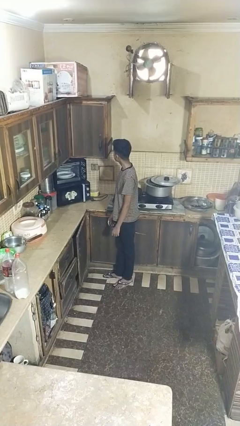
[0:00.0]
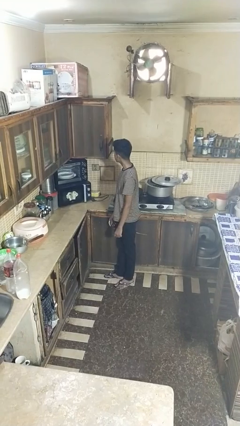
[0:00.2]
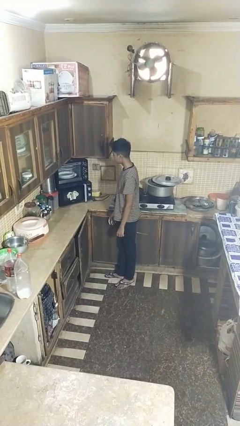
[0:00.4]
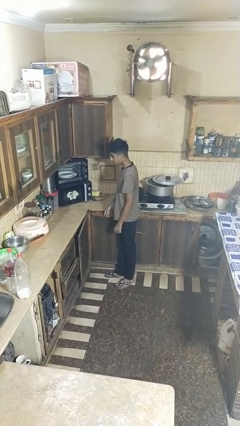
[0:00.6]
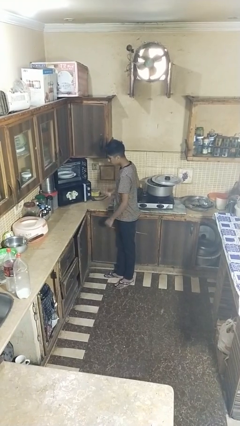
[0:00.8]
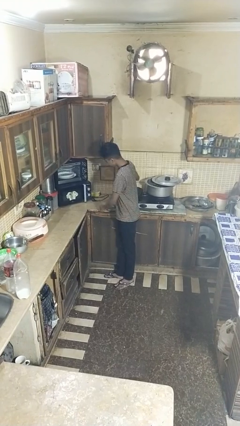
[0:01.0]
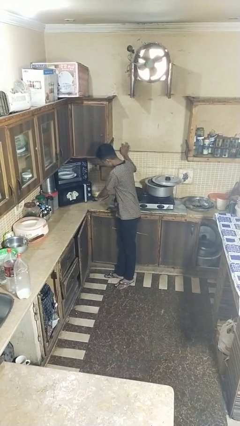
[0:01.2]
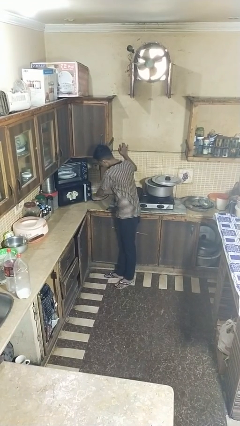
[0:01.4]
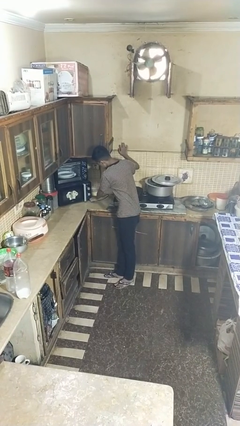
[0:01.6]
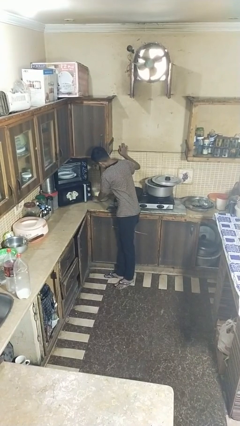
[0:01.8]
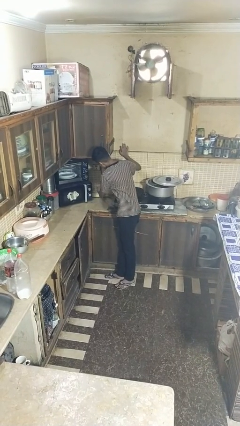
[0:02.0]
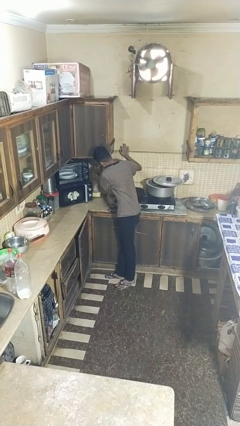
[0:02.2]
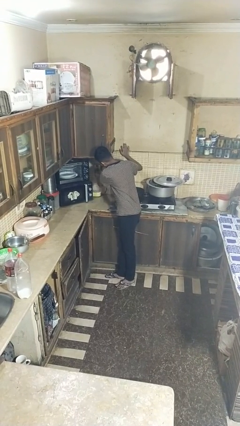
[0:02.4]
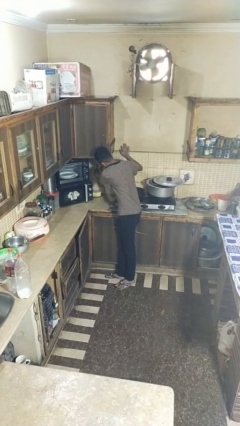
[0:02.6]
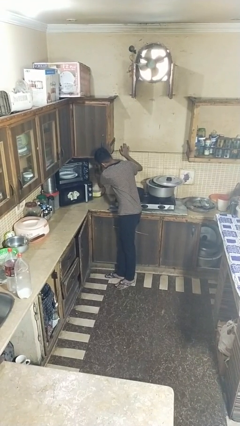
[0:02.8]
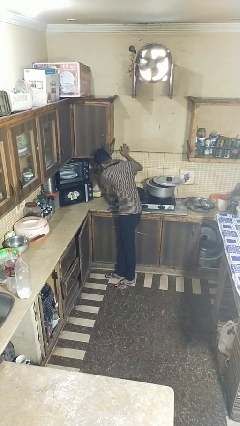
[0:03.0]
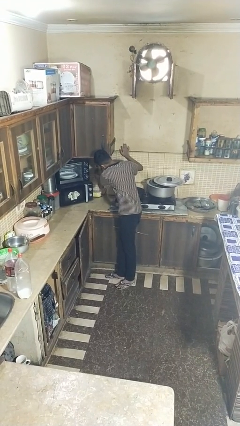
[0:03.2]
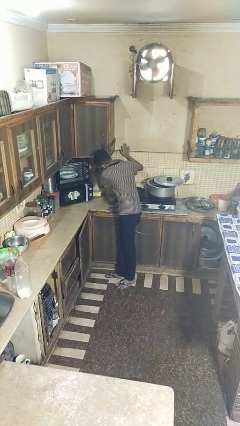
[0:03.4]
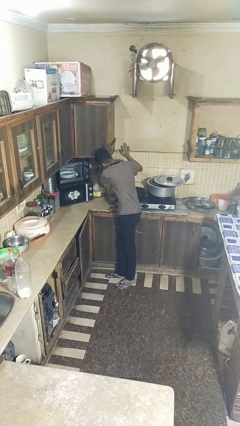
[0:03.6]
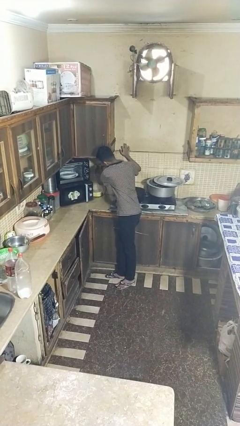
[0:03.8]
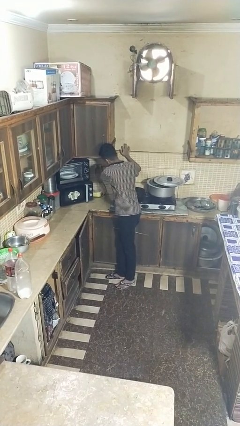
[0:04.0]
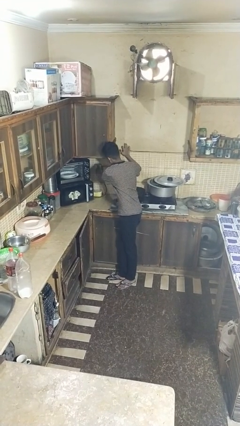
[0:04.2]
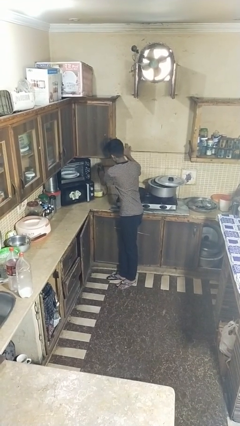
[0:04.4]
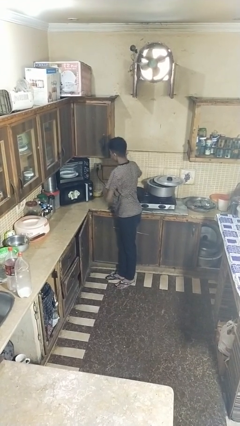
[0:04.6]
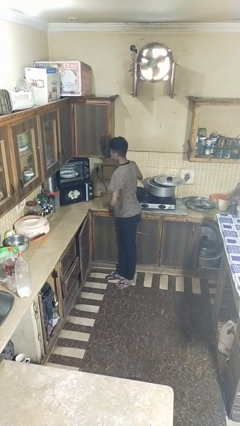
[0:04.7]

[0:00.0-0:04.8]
person plugs into electrical socket

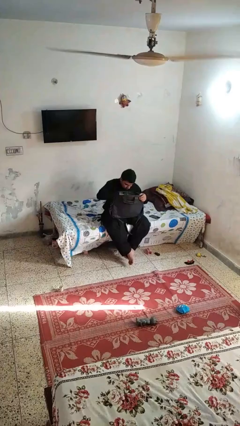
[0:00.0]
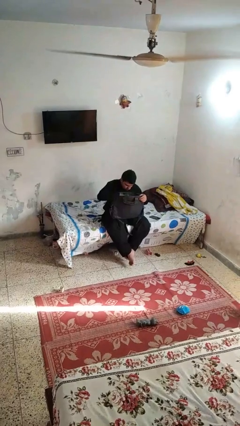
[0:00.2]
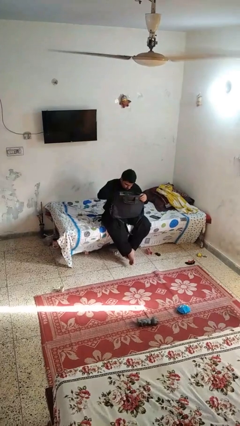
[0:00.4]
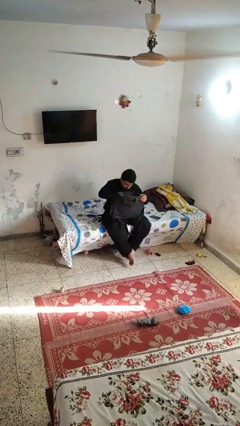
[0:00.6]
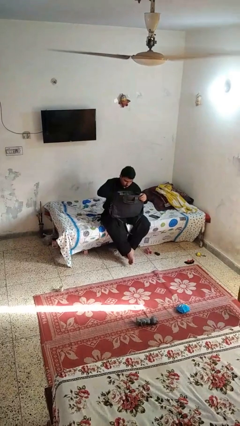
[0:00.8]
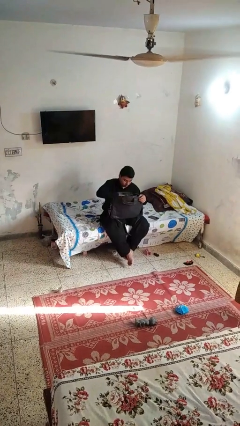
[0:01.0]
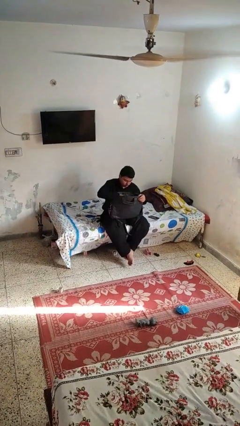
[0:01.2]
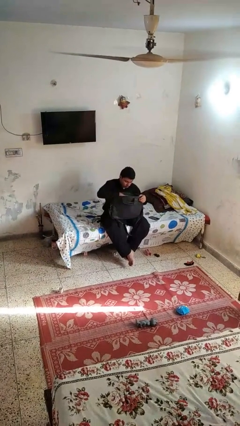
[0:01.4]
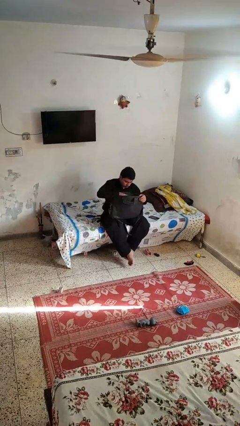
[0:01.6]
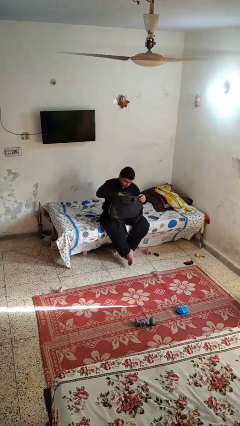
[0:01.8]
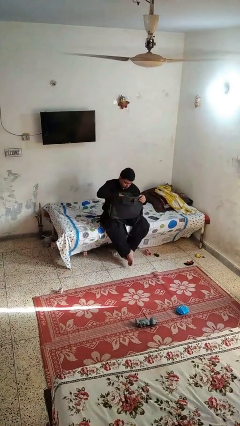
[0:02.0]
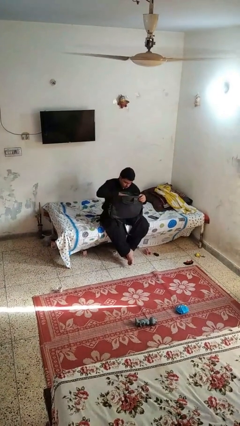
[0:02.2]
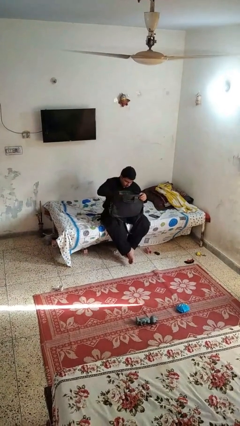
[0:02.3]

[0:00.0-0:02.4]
person searches in backpack

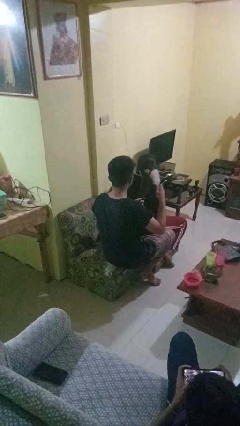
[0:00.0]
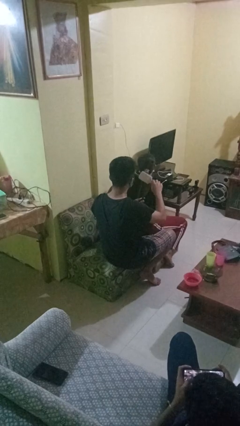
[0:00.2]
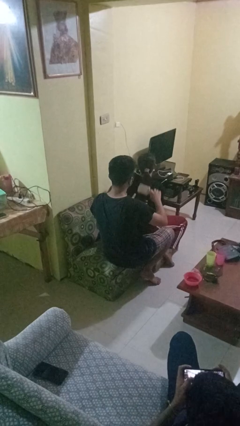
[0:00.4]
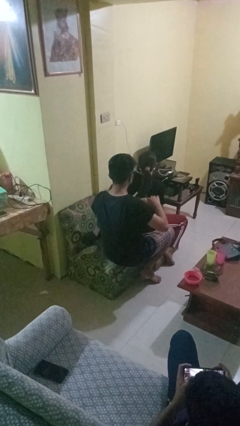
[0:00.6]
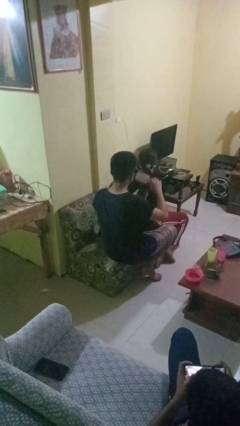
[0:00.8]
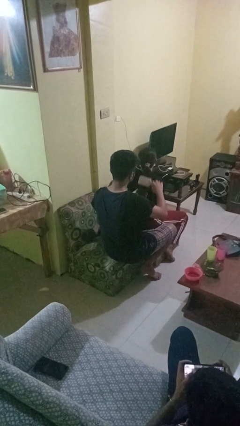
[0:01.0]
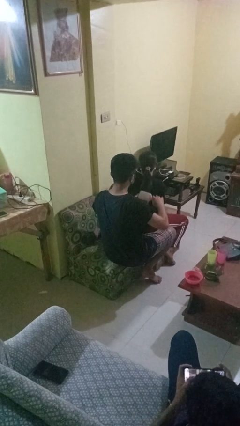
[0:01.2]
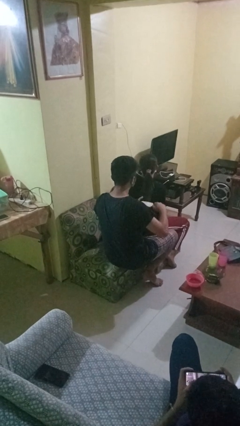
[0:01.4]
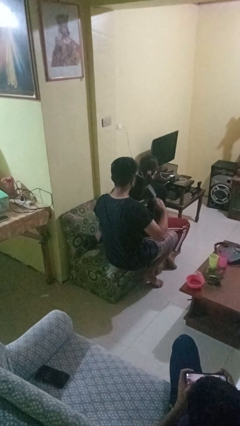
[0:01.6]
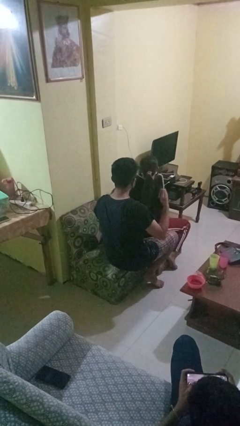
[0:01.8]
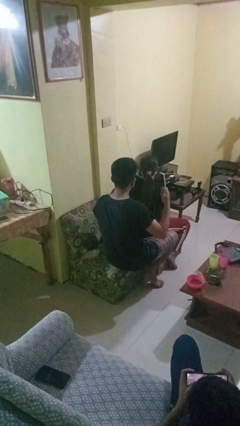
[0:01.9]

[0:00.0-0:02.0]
person brushes hair of person

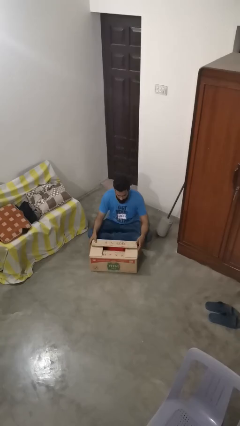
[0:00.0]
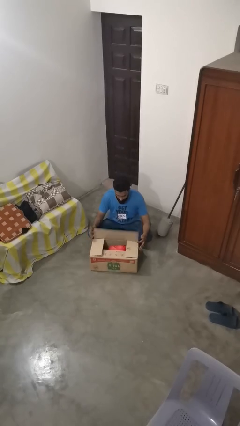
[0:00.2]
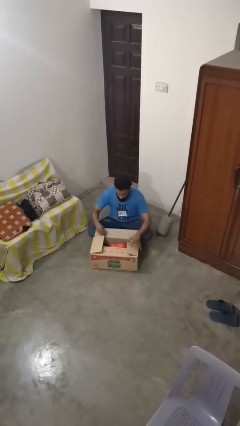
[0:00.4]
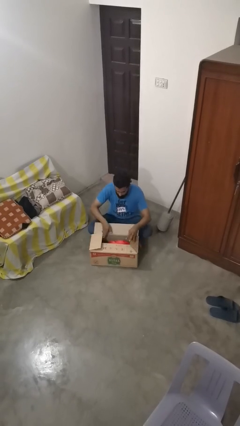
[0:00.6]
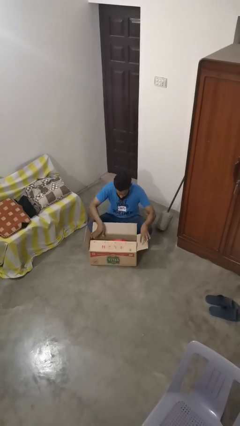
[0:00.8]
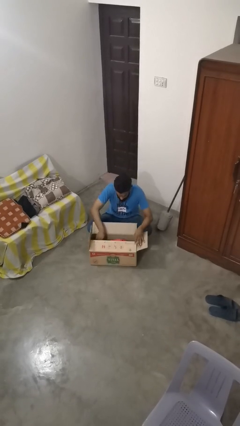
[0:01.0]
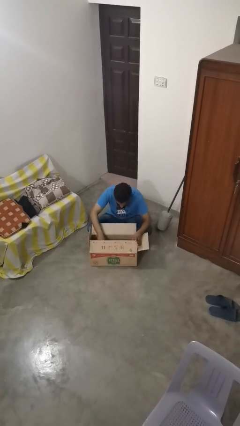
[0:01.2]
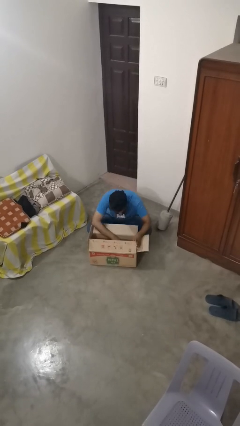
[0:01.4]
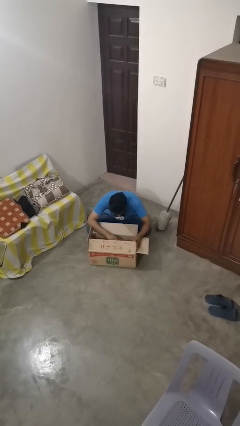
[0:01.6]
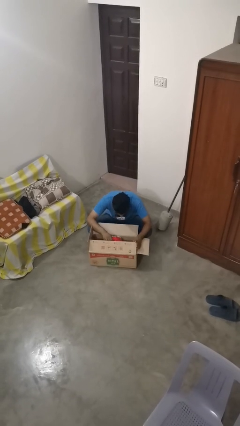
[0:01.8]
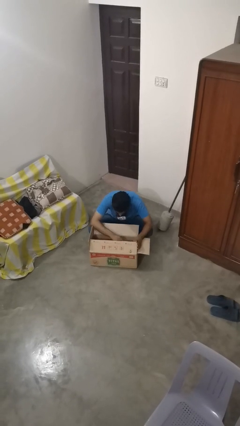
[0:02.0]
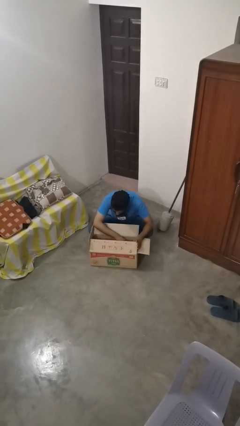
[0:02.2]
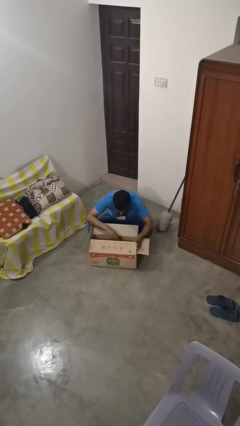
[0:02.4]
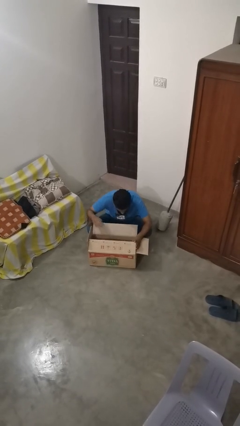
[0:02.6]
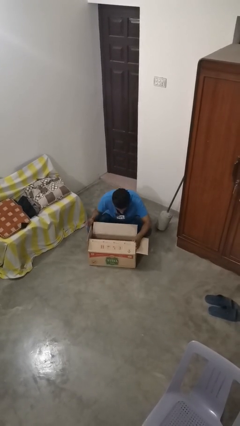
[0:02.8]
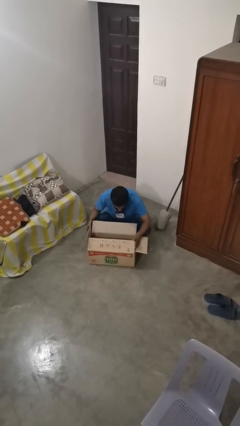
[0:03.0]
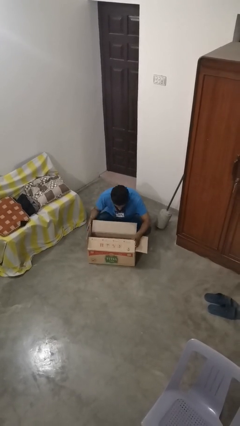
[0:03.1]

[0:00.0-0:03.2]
person searches in box

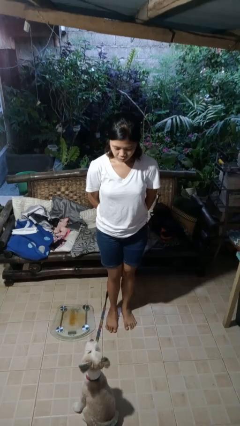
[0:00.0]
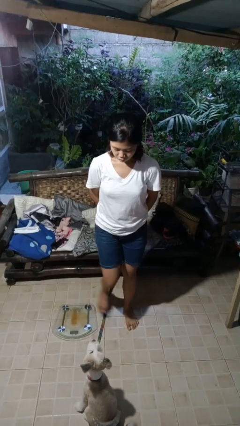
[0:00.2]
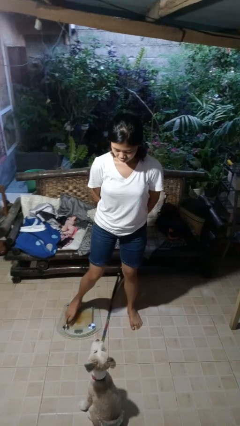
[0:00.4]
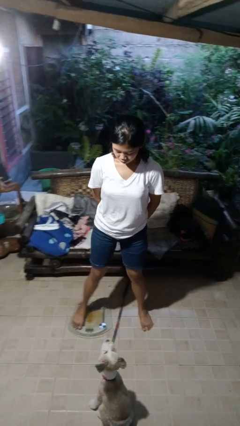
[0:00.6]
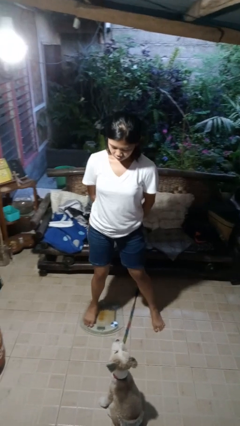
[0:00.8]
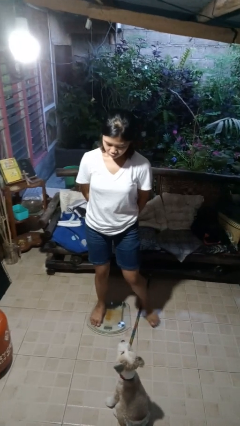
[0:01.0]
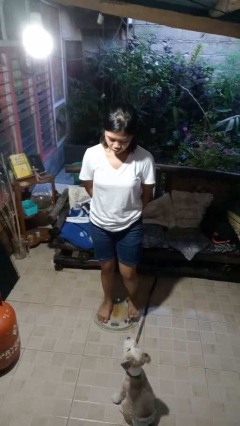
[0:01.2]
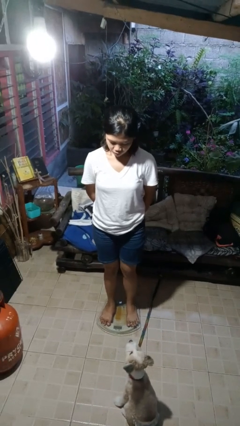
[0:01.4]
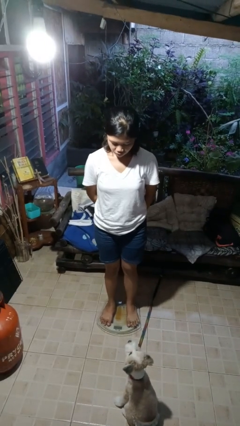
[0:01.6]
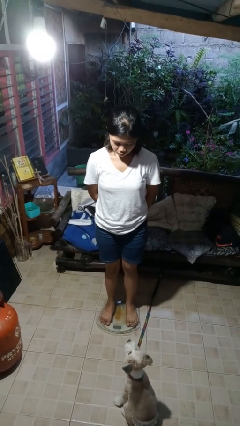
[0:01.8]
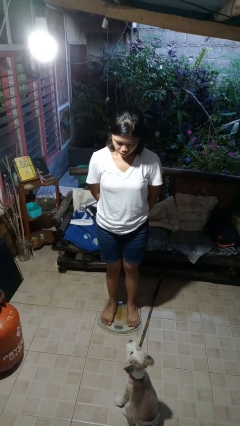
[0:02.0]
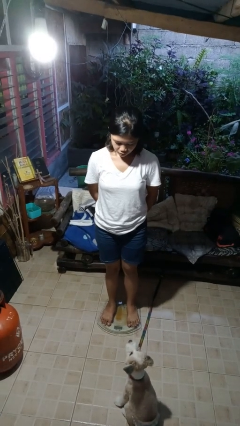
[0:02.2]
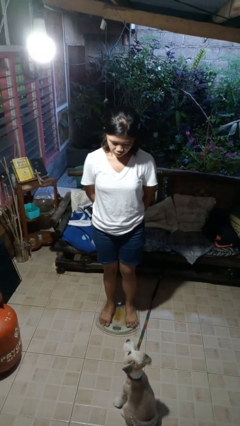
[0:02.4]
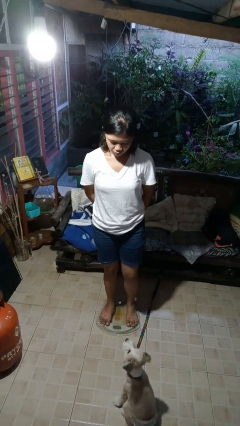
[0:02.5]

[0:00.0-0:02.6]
person uses bodyweight scale

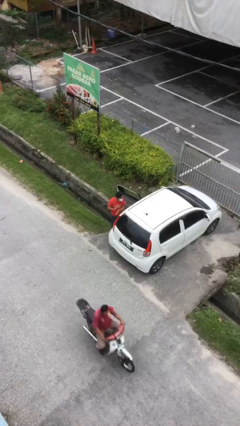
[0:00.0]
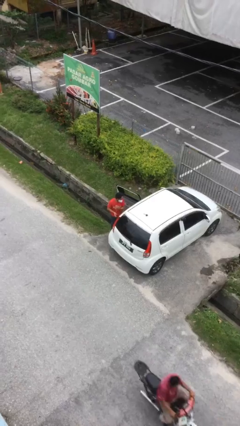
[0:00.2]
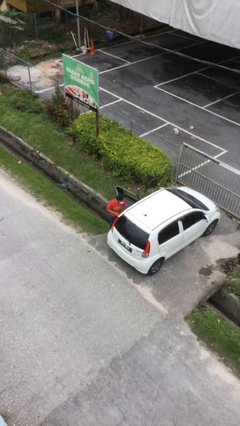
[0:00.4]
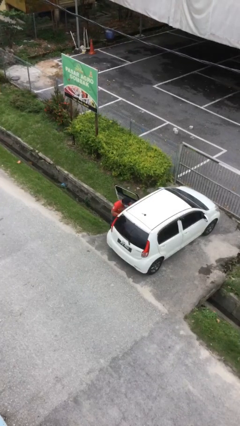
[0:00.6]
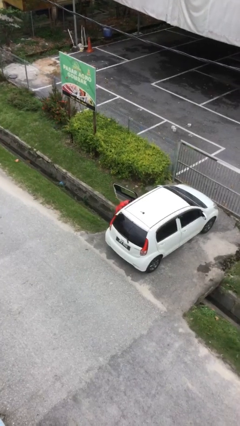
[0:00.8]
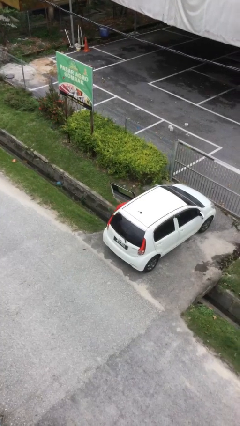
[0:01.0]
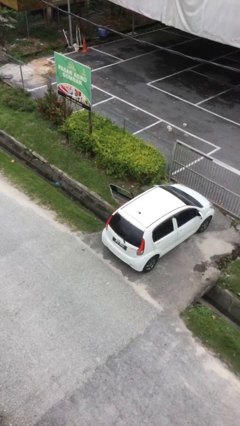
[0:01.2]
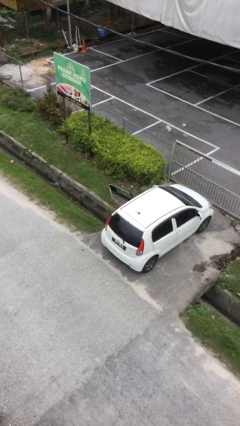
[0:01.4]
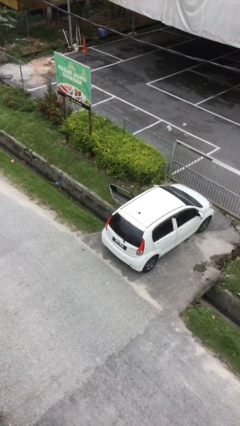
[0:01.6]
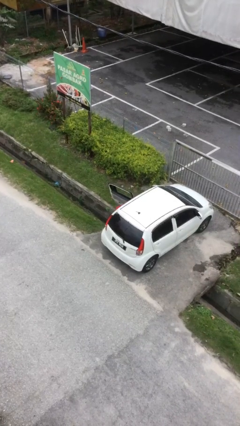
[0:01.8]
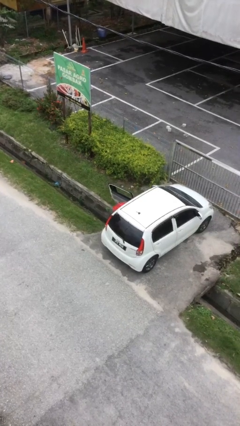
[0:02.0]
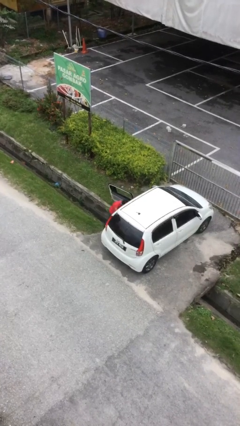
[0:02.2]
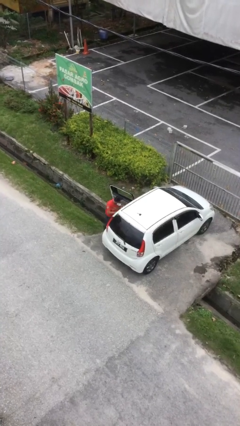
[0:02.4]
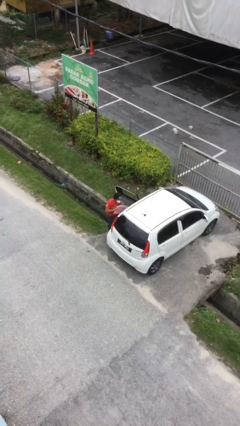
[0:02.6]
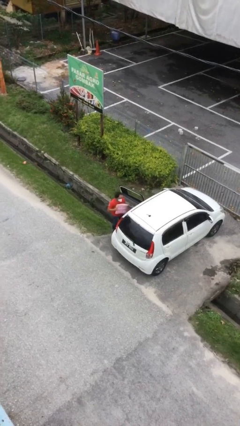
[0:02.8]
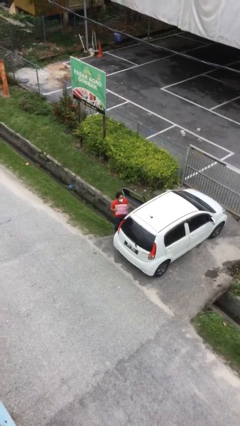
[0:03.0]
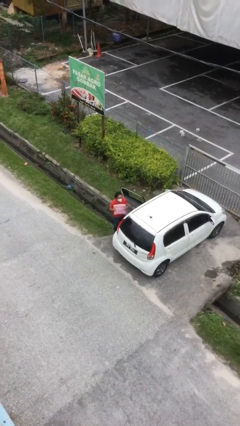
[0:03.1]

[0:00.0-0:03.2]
person unloads car
